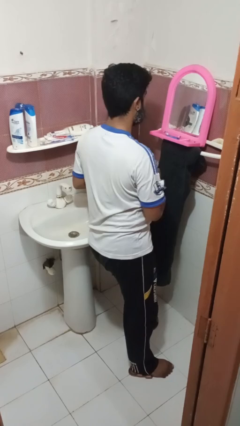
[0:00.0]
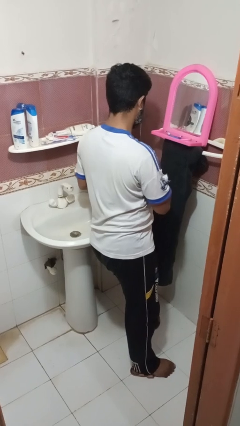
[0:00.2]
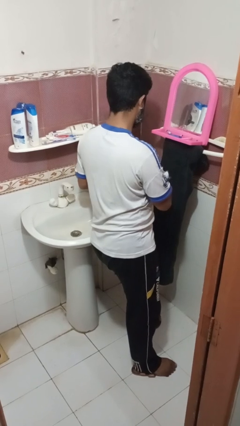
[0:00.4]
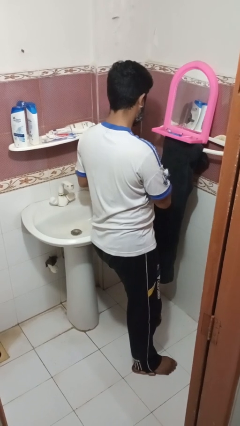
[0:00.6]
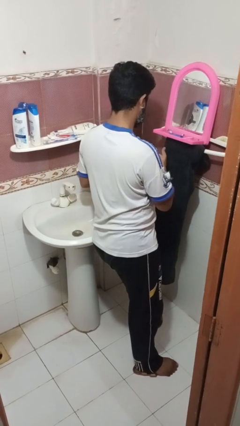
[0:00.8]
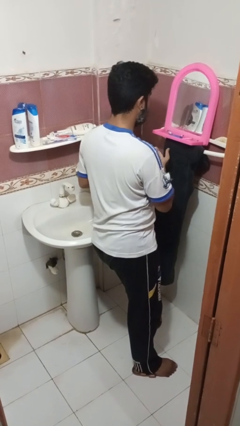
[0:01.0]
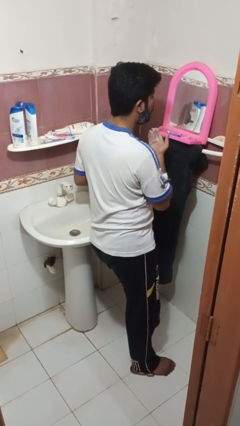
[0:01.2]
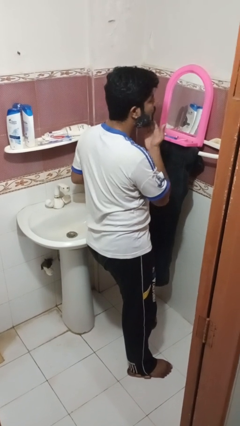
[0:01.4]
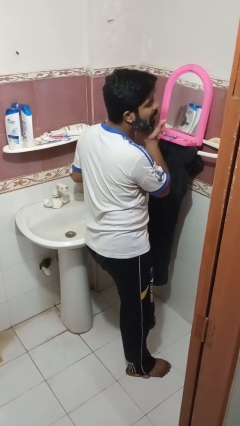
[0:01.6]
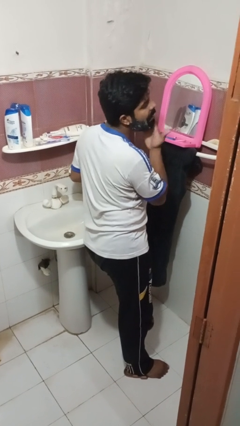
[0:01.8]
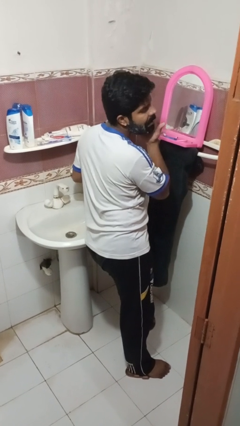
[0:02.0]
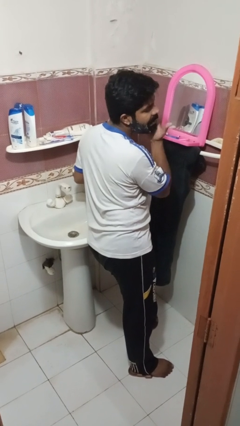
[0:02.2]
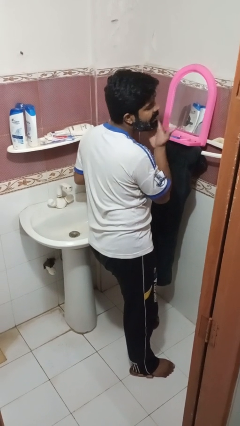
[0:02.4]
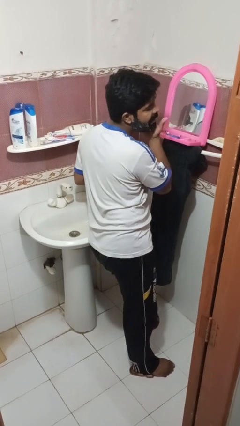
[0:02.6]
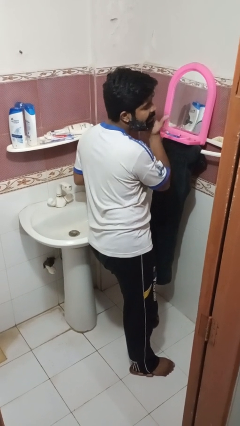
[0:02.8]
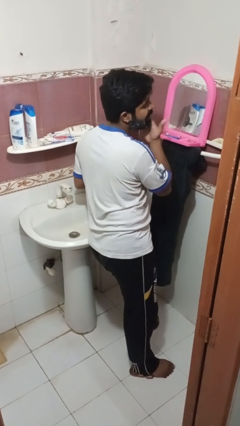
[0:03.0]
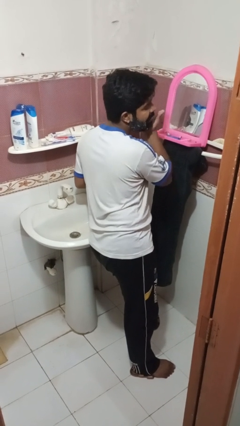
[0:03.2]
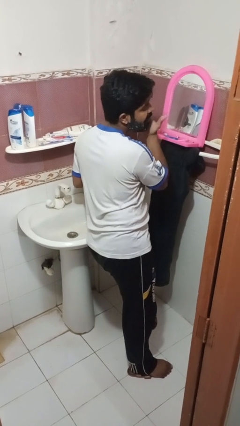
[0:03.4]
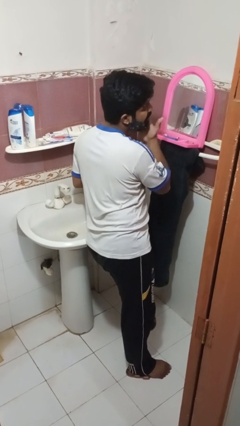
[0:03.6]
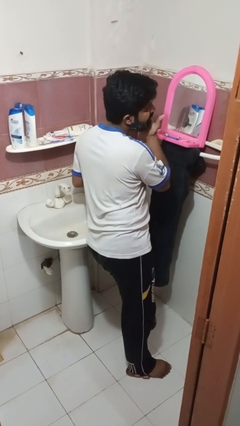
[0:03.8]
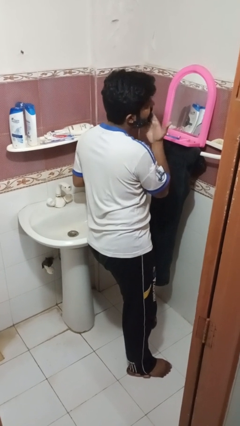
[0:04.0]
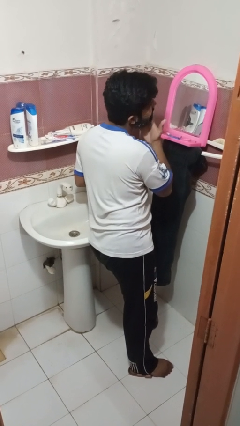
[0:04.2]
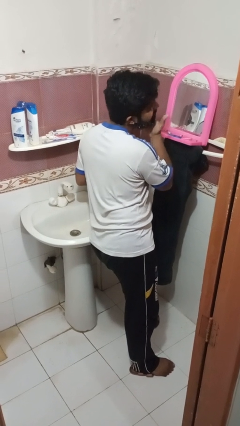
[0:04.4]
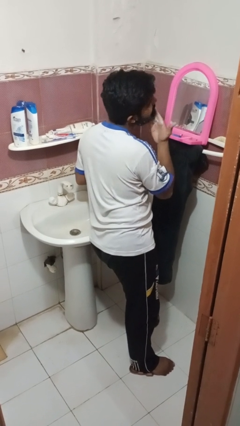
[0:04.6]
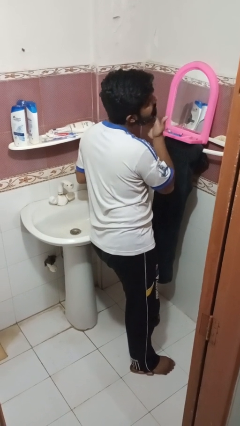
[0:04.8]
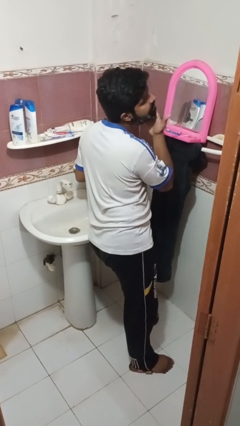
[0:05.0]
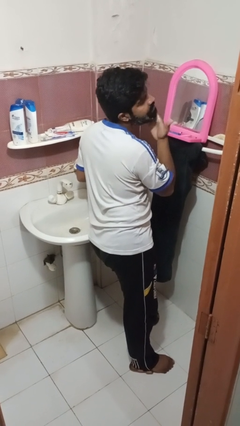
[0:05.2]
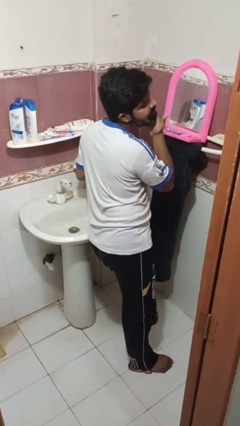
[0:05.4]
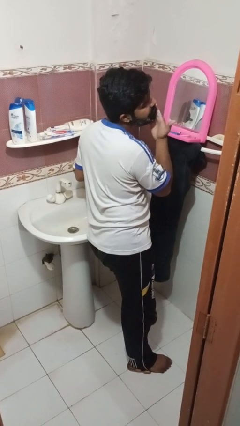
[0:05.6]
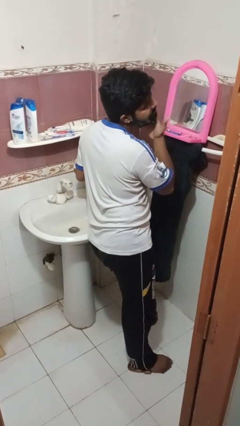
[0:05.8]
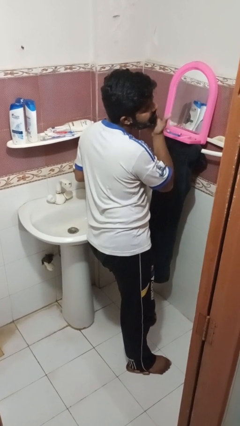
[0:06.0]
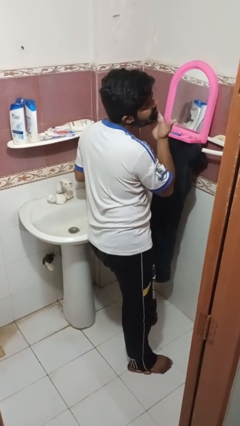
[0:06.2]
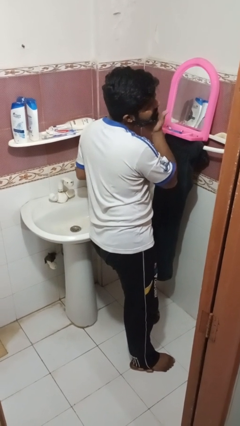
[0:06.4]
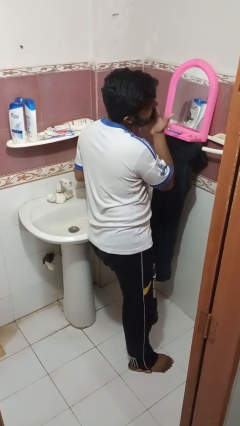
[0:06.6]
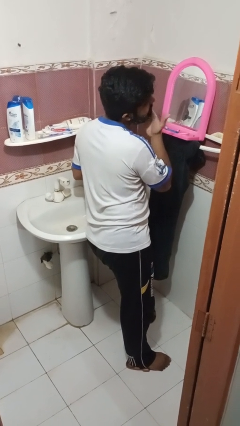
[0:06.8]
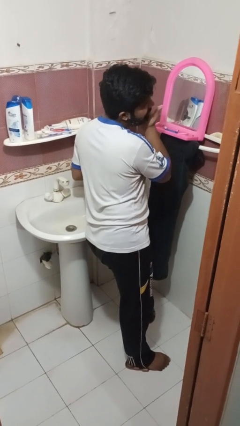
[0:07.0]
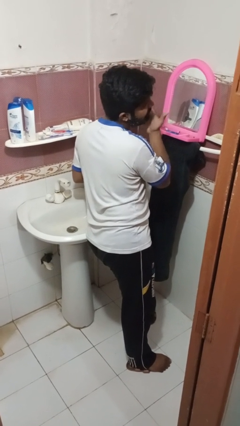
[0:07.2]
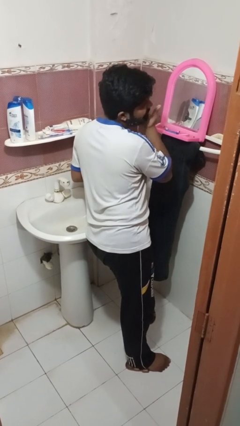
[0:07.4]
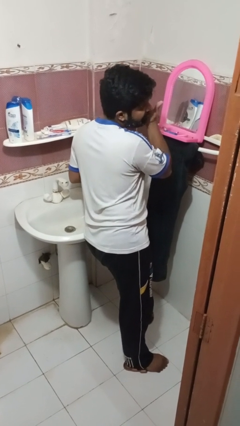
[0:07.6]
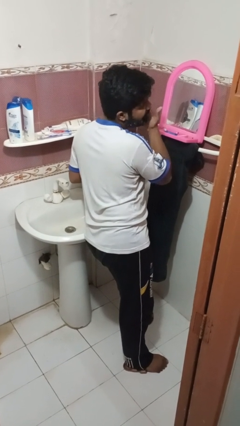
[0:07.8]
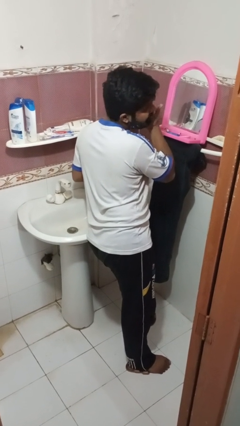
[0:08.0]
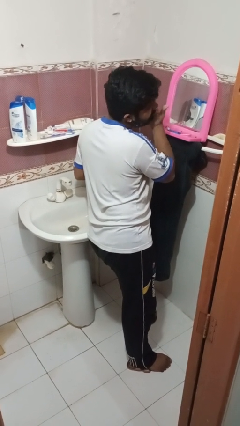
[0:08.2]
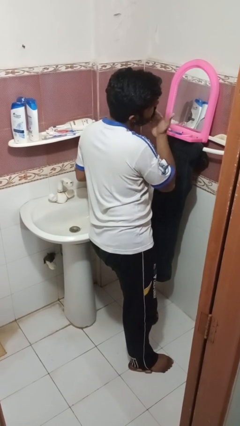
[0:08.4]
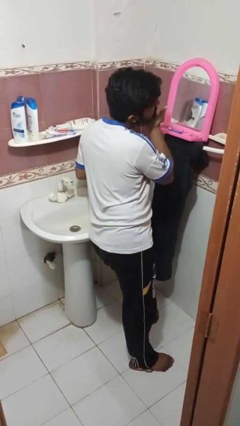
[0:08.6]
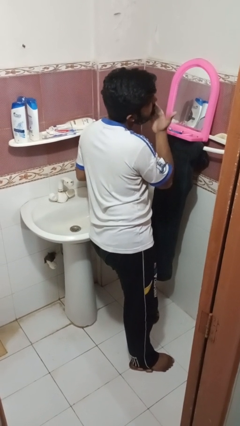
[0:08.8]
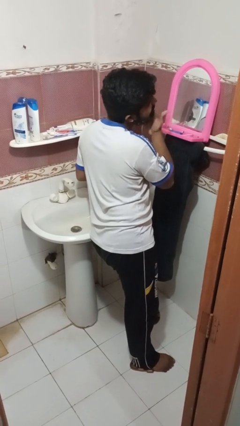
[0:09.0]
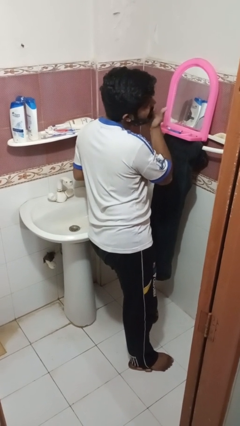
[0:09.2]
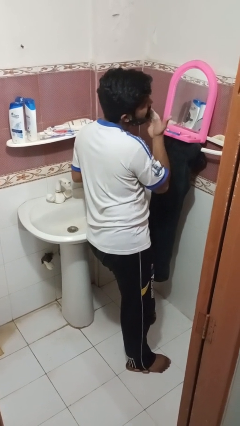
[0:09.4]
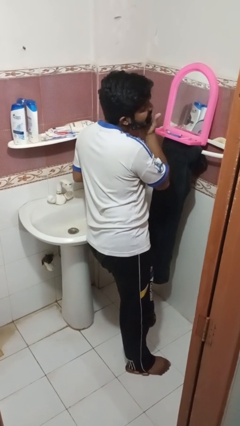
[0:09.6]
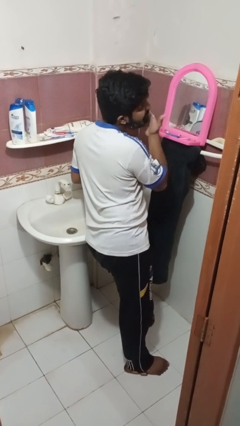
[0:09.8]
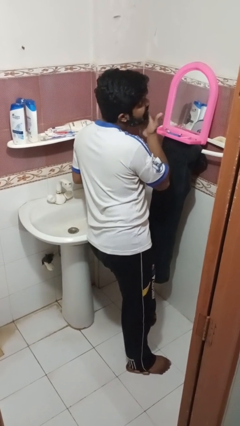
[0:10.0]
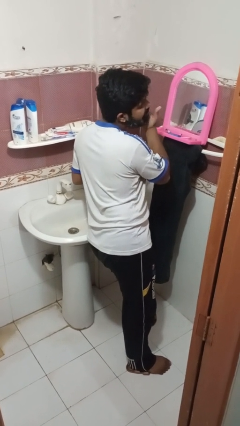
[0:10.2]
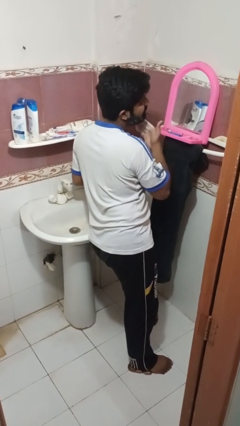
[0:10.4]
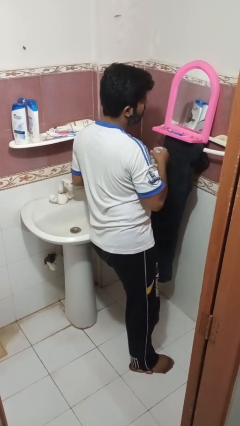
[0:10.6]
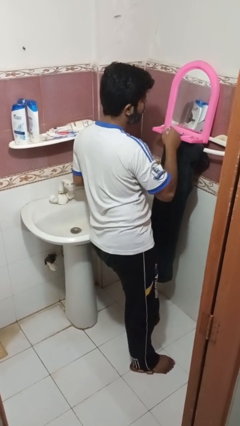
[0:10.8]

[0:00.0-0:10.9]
person applies shaving cream

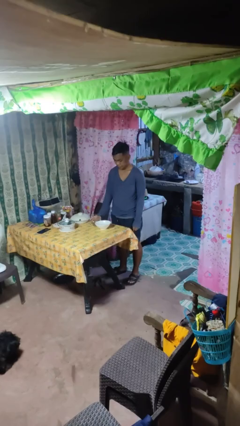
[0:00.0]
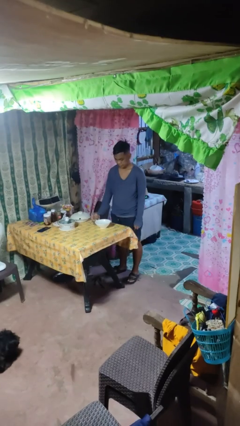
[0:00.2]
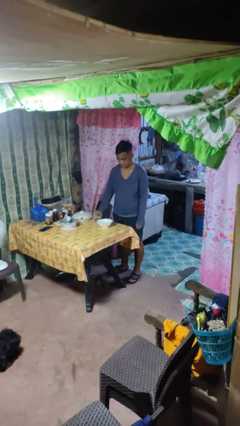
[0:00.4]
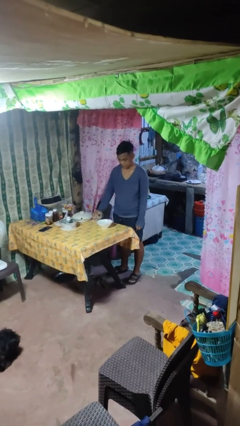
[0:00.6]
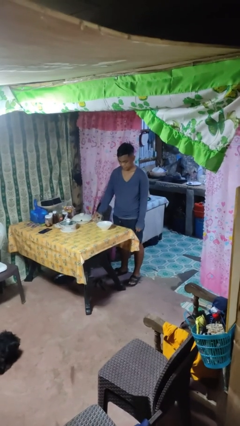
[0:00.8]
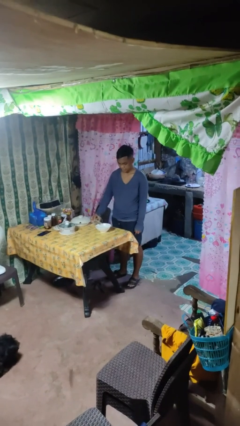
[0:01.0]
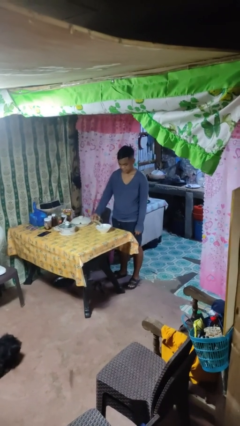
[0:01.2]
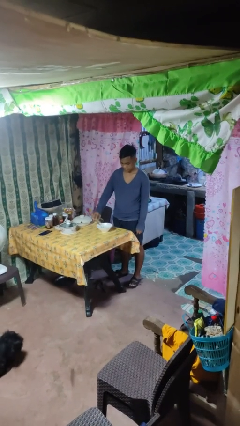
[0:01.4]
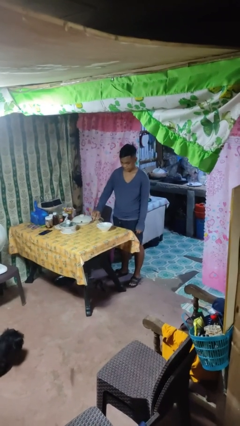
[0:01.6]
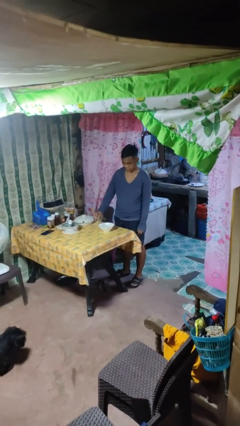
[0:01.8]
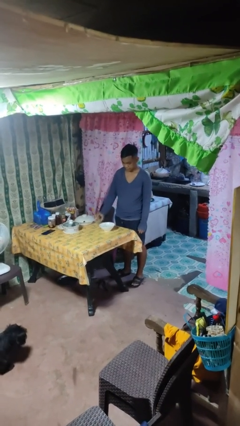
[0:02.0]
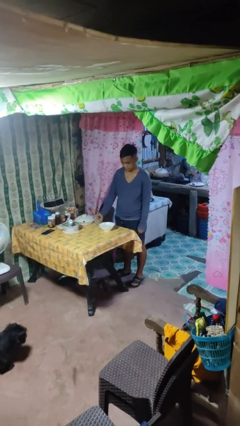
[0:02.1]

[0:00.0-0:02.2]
person pours into bowl

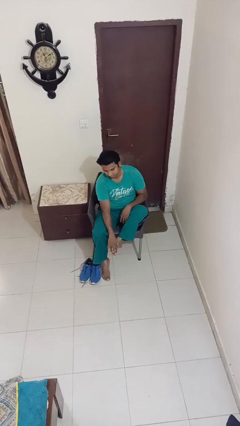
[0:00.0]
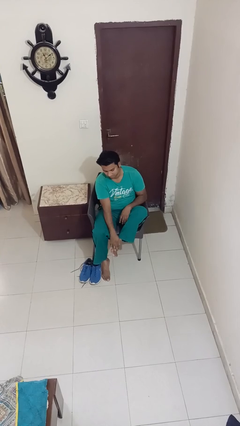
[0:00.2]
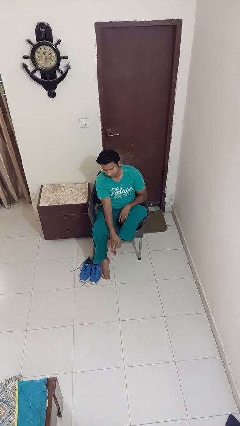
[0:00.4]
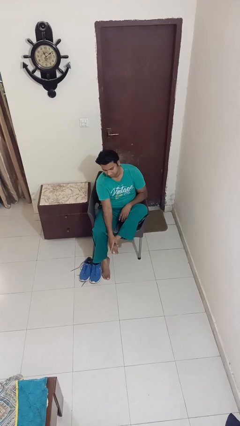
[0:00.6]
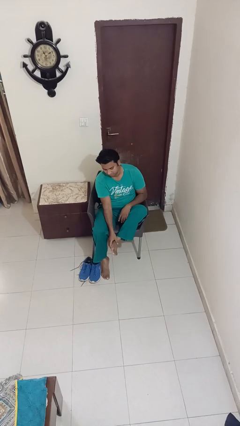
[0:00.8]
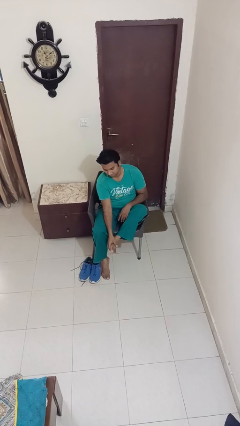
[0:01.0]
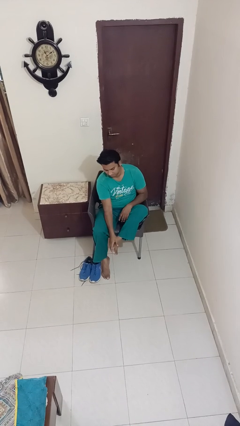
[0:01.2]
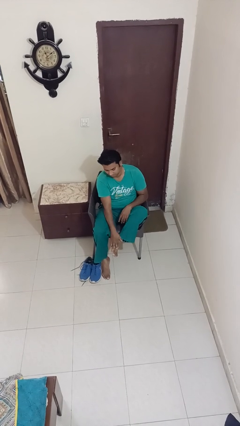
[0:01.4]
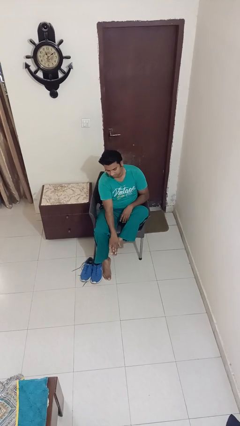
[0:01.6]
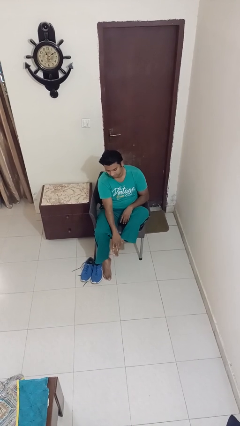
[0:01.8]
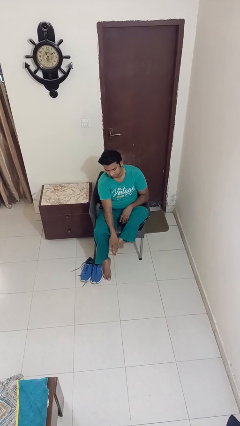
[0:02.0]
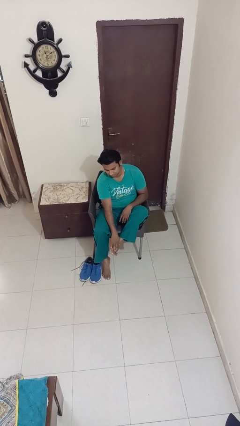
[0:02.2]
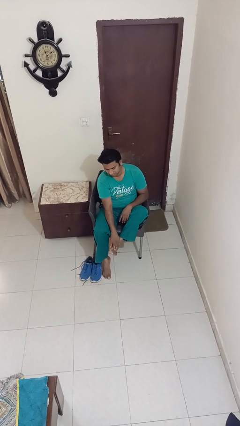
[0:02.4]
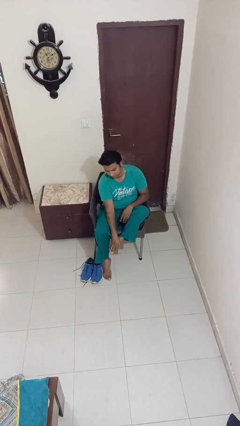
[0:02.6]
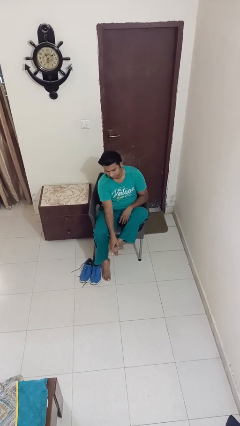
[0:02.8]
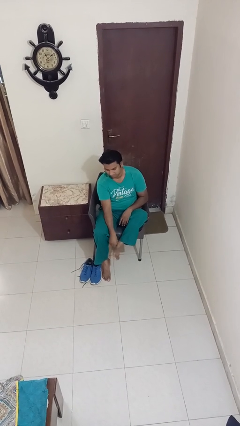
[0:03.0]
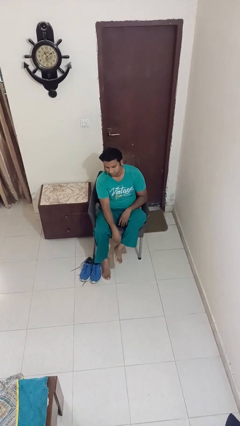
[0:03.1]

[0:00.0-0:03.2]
person rubs foot

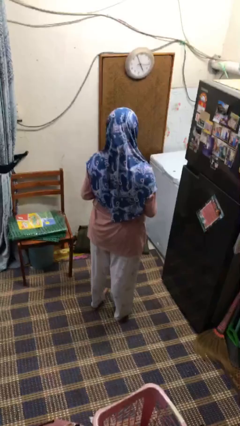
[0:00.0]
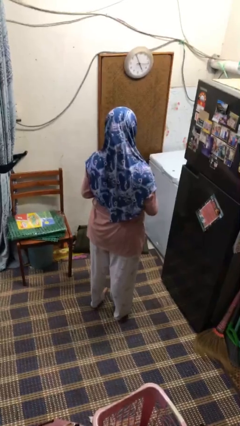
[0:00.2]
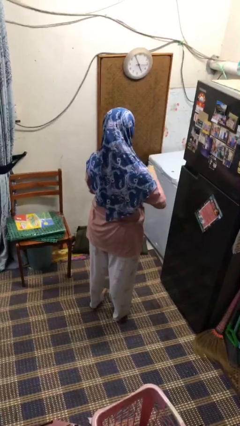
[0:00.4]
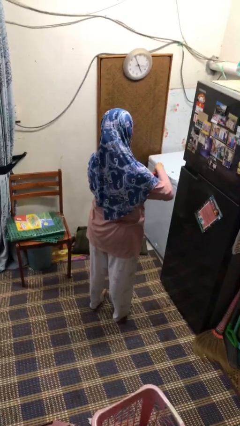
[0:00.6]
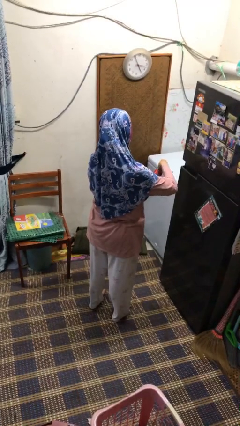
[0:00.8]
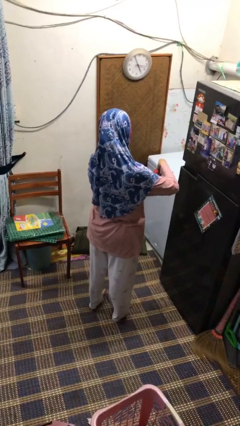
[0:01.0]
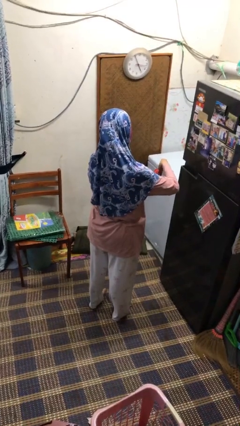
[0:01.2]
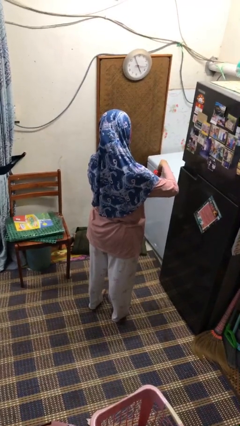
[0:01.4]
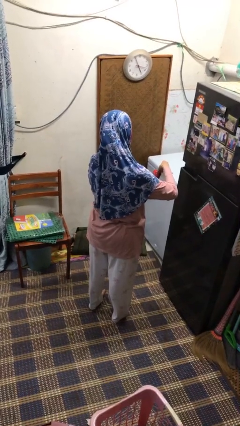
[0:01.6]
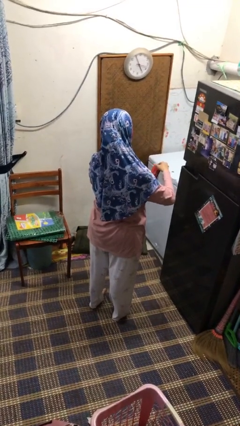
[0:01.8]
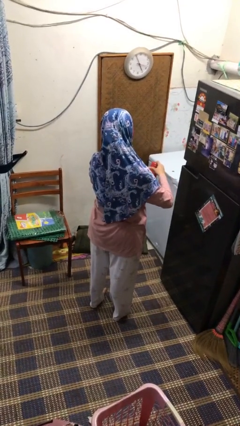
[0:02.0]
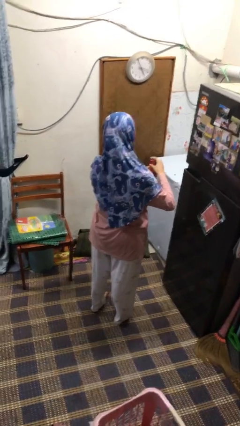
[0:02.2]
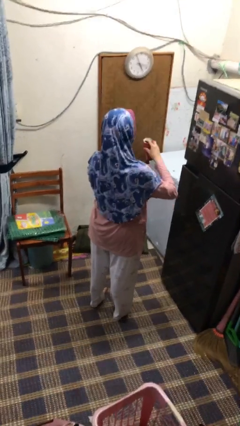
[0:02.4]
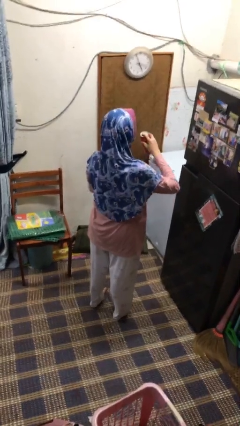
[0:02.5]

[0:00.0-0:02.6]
person opens beverage can
